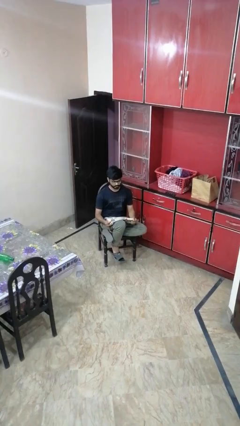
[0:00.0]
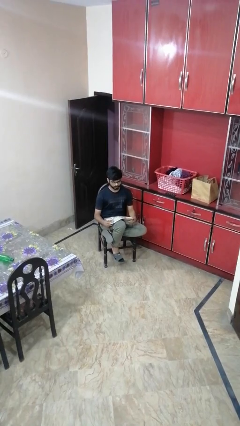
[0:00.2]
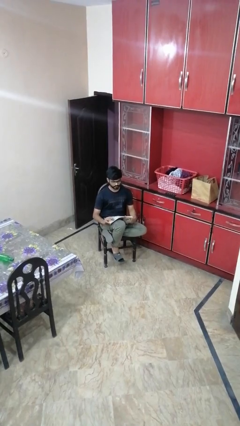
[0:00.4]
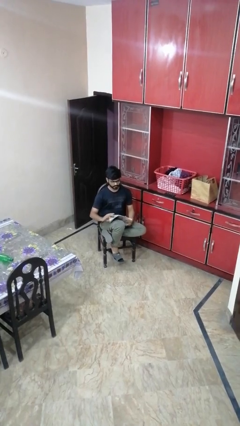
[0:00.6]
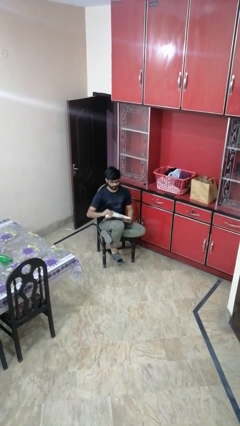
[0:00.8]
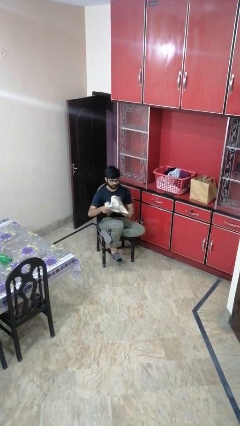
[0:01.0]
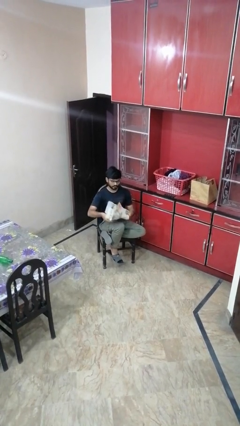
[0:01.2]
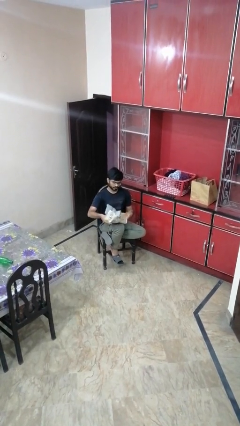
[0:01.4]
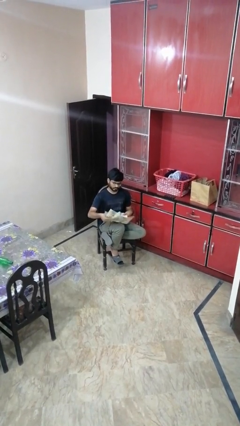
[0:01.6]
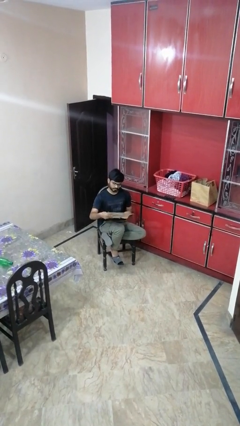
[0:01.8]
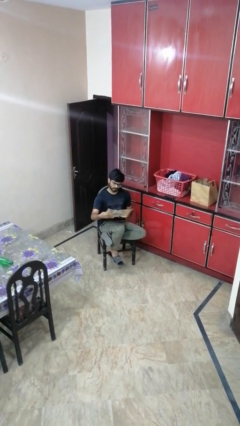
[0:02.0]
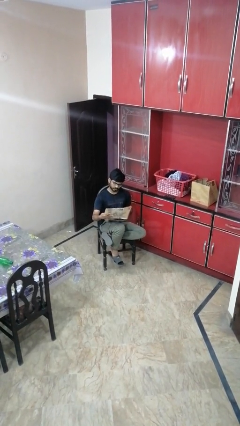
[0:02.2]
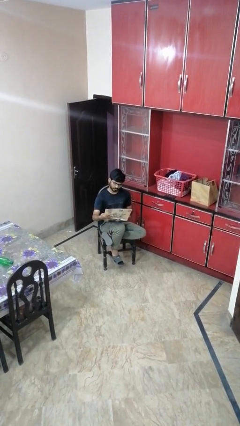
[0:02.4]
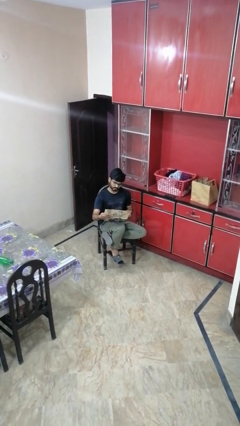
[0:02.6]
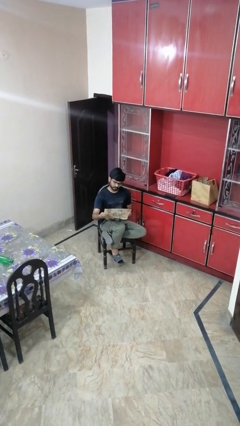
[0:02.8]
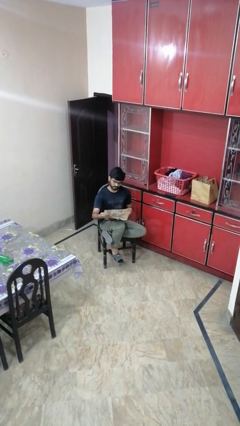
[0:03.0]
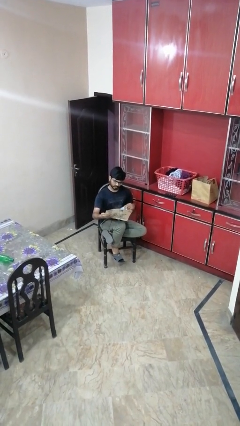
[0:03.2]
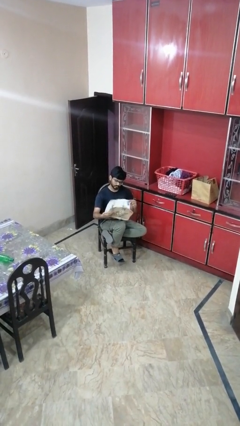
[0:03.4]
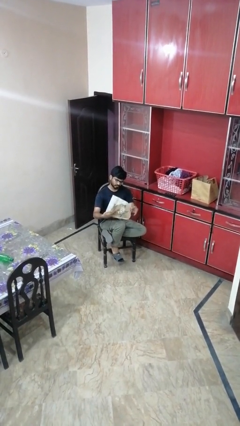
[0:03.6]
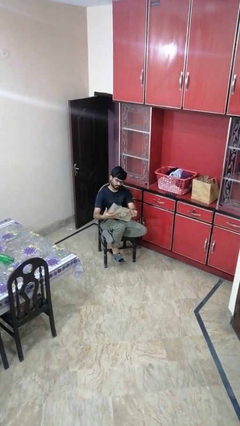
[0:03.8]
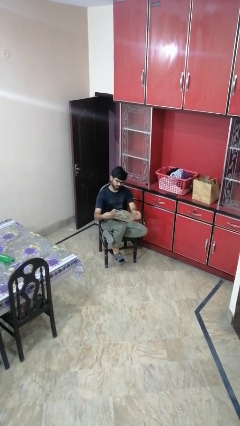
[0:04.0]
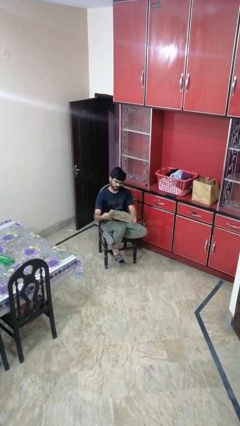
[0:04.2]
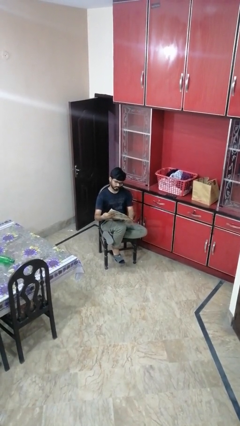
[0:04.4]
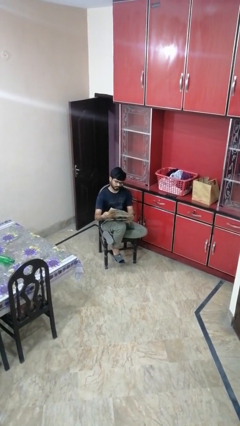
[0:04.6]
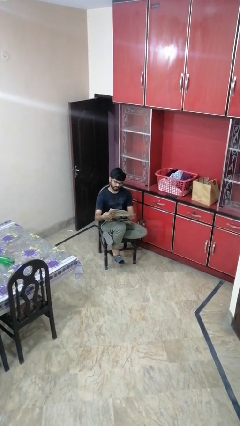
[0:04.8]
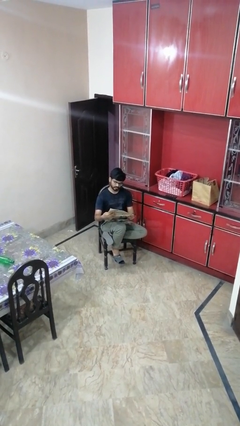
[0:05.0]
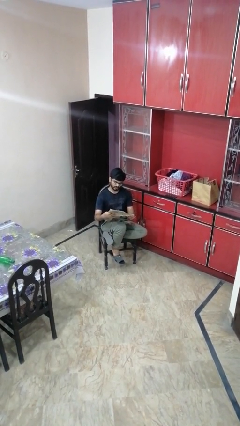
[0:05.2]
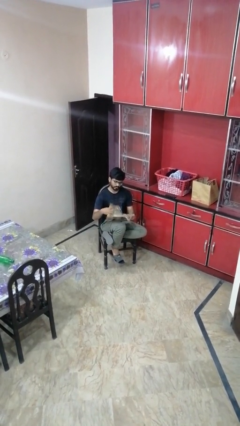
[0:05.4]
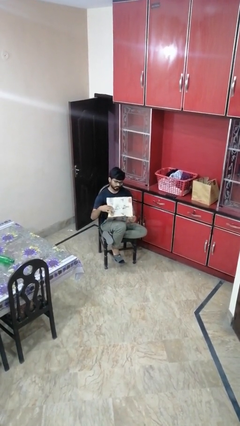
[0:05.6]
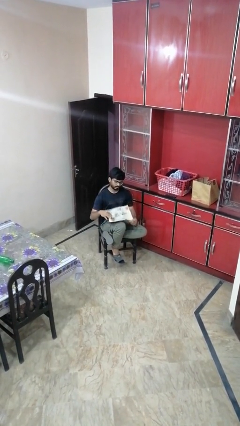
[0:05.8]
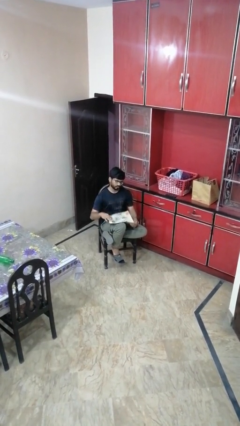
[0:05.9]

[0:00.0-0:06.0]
person reads newspaper

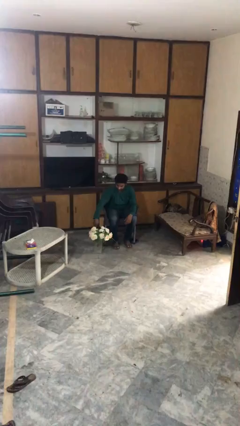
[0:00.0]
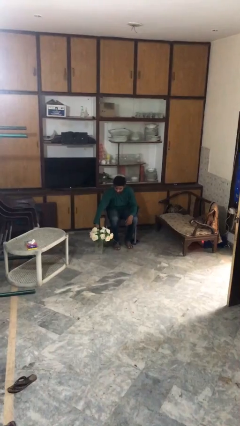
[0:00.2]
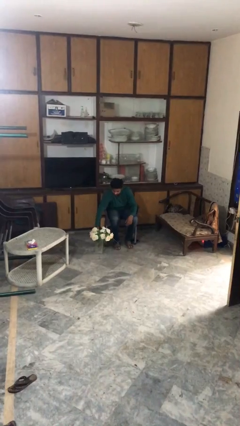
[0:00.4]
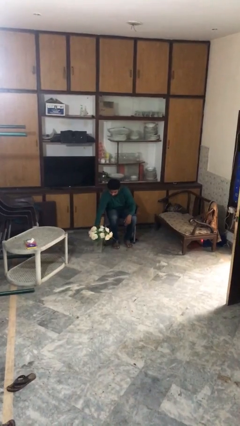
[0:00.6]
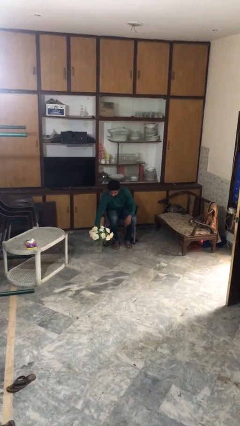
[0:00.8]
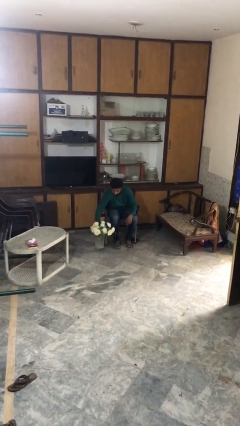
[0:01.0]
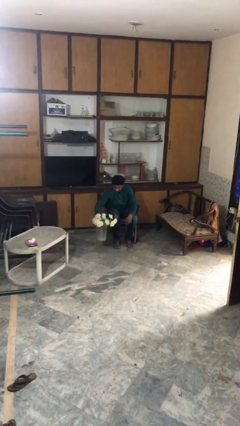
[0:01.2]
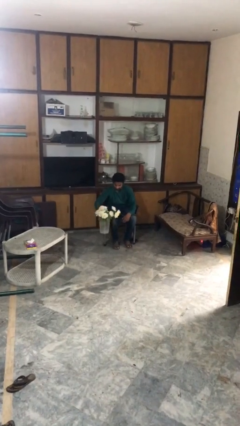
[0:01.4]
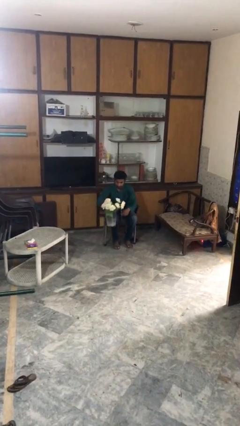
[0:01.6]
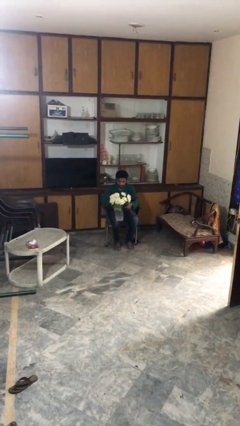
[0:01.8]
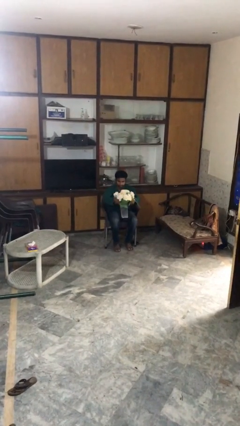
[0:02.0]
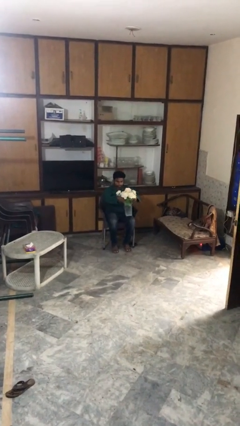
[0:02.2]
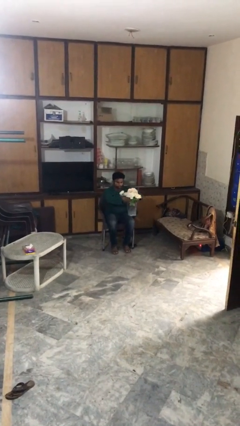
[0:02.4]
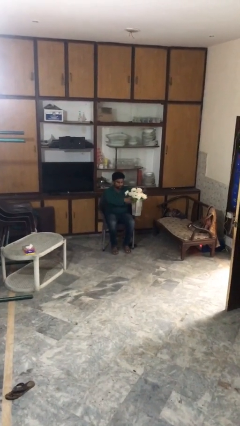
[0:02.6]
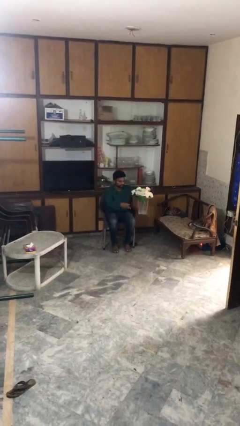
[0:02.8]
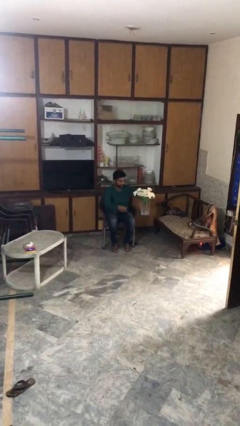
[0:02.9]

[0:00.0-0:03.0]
person picks up object from floor

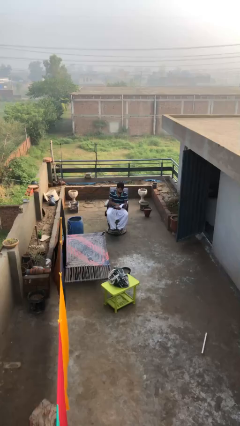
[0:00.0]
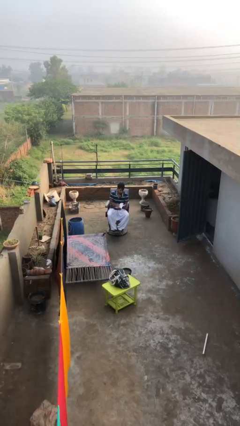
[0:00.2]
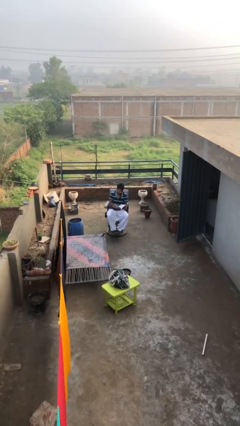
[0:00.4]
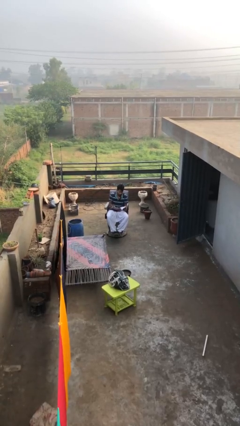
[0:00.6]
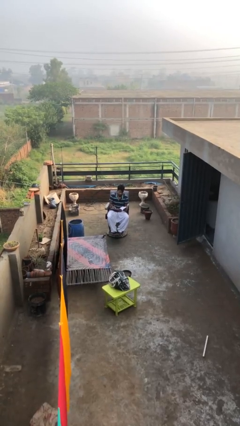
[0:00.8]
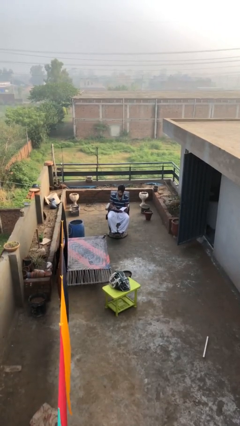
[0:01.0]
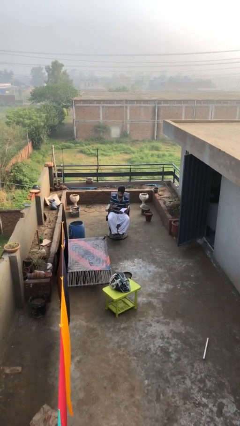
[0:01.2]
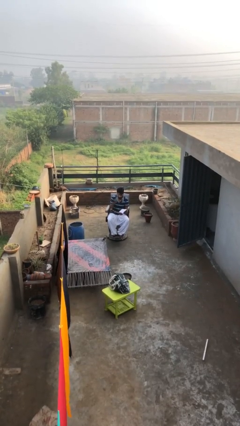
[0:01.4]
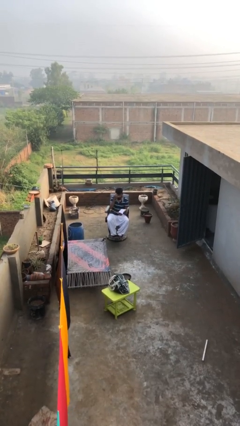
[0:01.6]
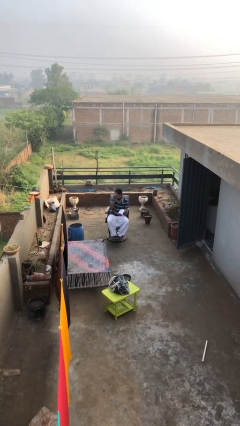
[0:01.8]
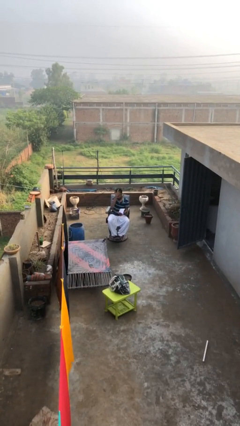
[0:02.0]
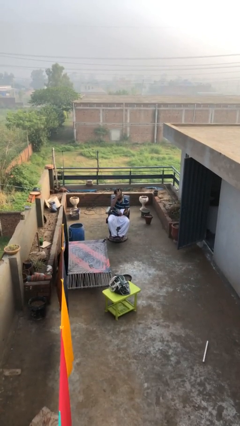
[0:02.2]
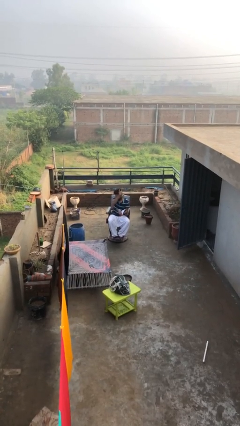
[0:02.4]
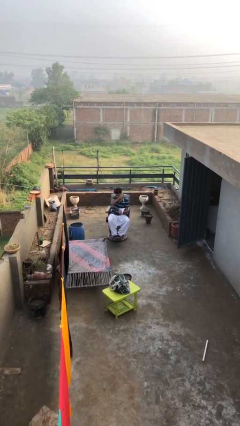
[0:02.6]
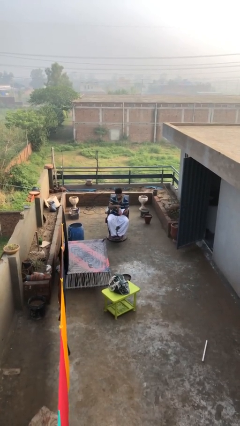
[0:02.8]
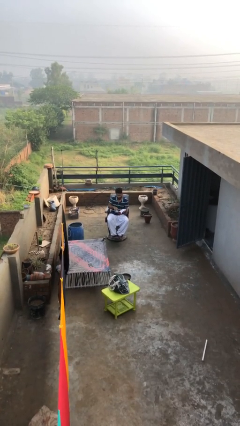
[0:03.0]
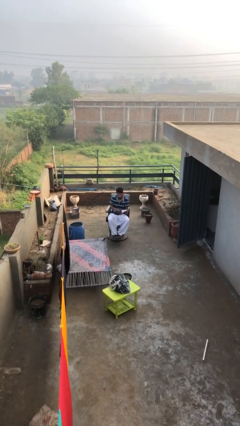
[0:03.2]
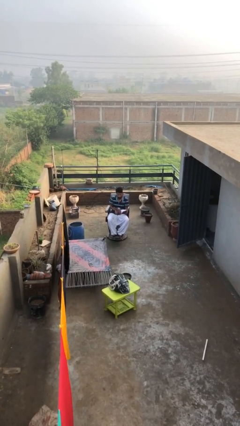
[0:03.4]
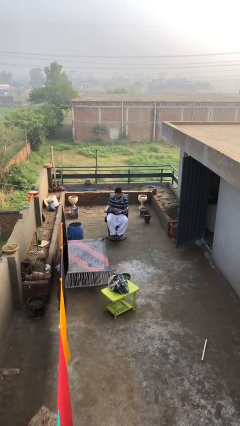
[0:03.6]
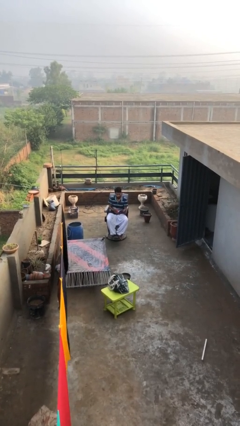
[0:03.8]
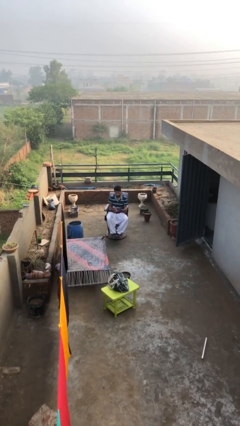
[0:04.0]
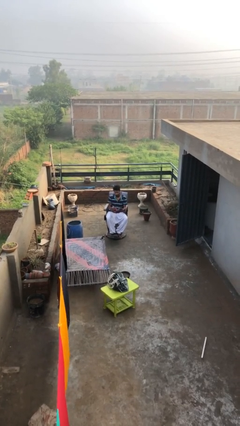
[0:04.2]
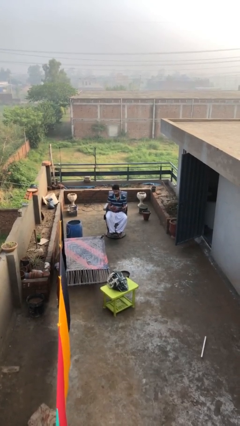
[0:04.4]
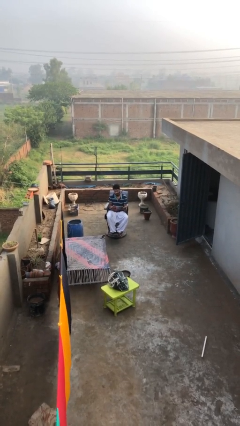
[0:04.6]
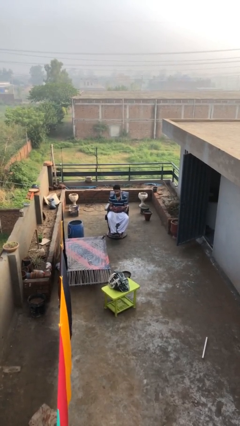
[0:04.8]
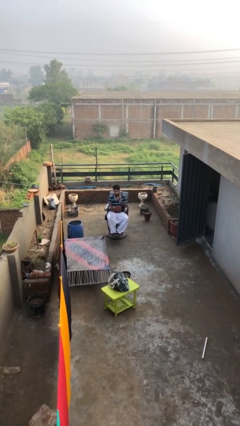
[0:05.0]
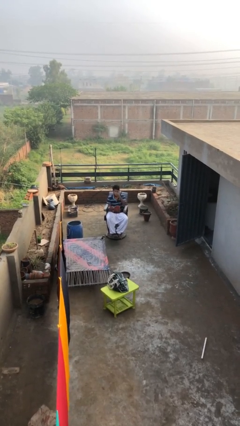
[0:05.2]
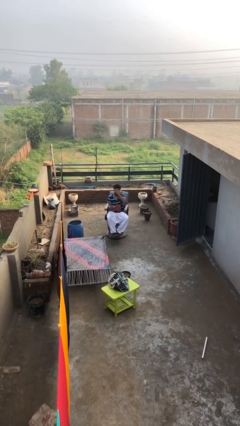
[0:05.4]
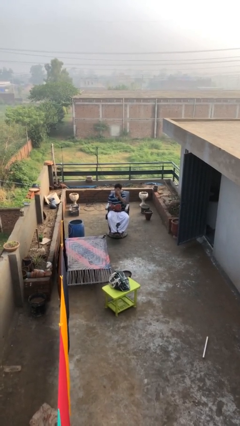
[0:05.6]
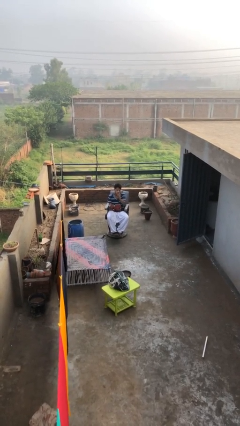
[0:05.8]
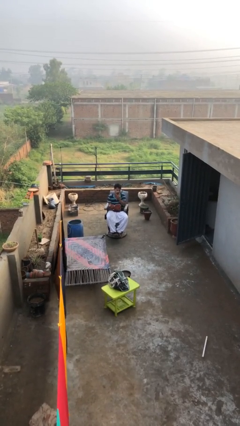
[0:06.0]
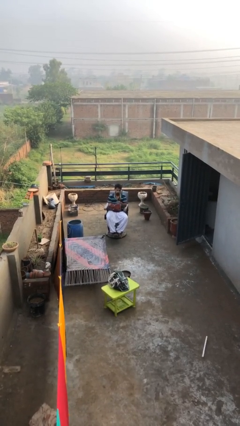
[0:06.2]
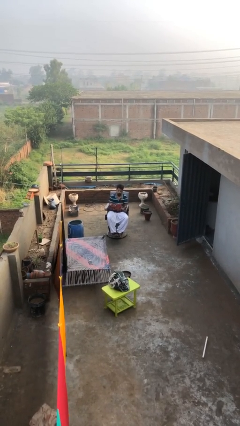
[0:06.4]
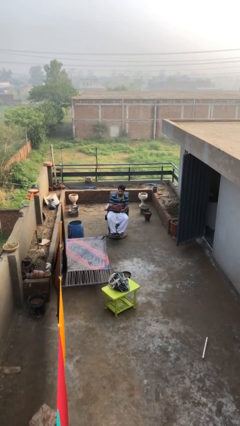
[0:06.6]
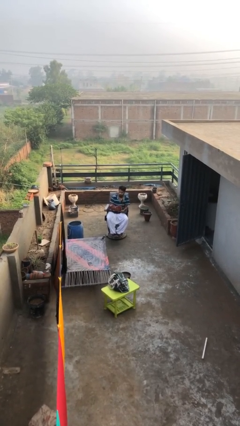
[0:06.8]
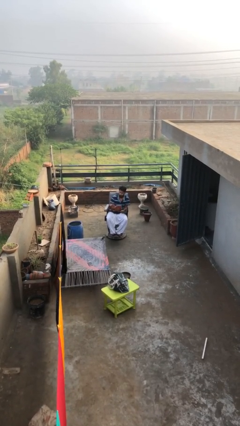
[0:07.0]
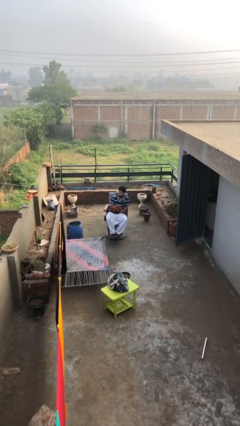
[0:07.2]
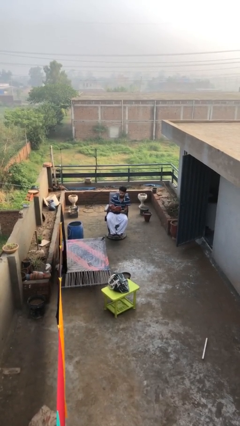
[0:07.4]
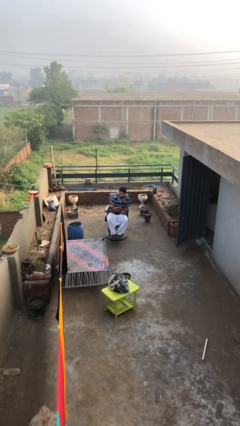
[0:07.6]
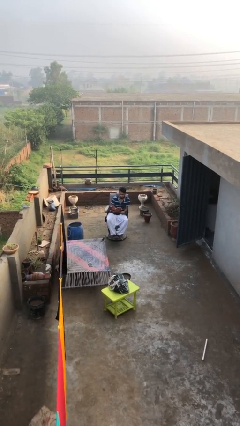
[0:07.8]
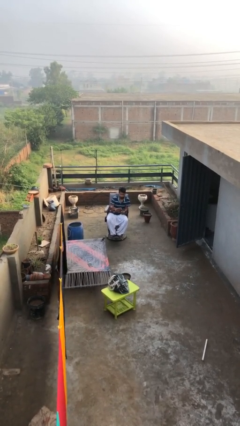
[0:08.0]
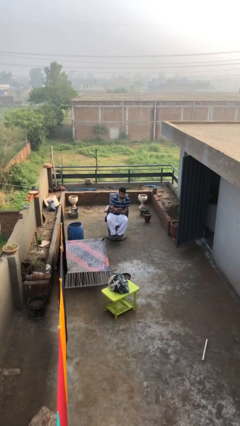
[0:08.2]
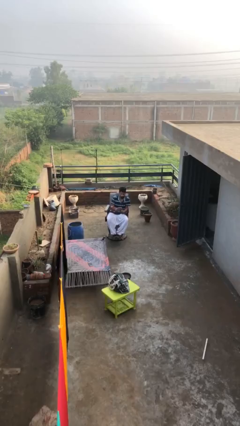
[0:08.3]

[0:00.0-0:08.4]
person reads document
